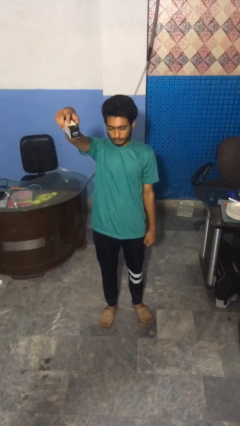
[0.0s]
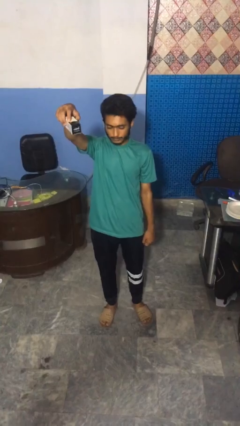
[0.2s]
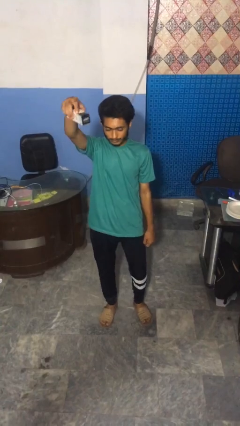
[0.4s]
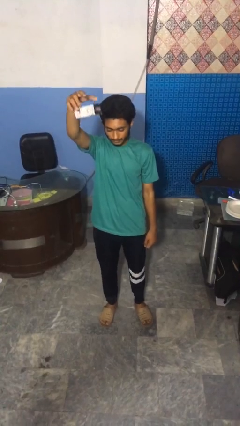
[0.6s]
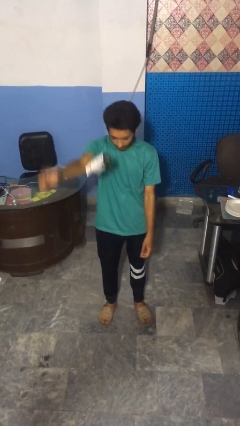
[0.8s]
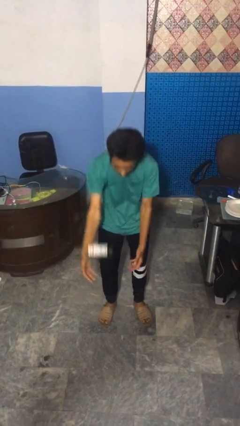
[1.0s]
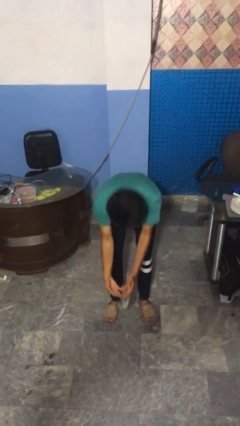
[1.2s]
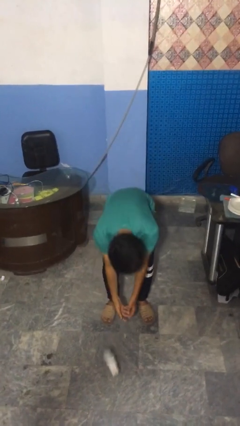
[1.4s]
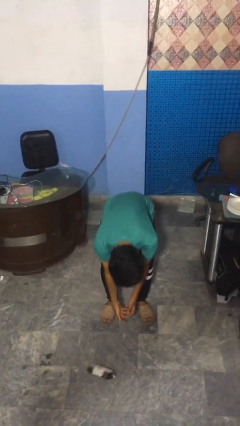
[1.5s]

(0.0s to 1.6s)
person drops object

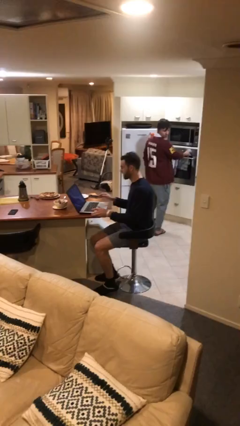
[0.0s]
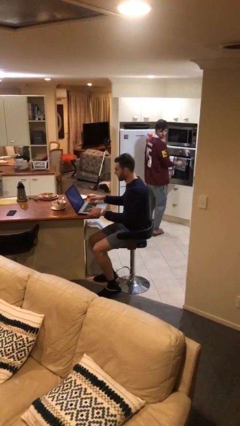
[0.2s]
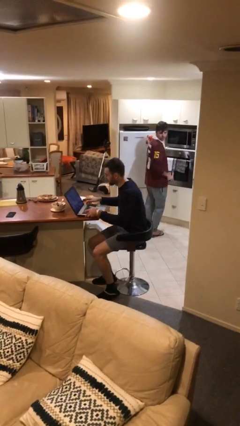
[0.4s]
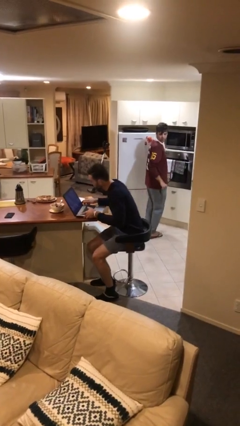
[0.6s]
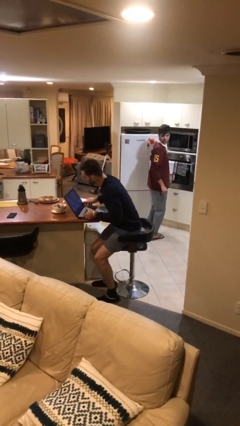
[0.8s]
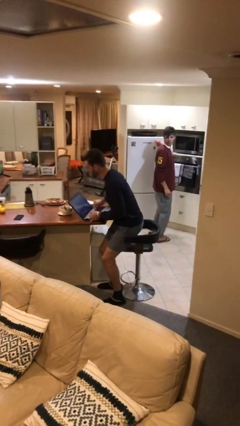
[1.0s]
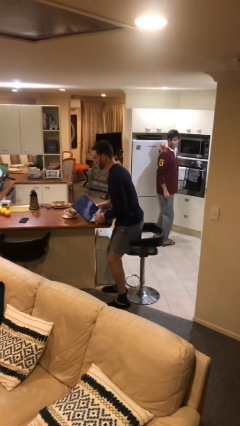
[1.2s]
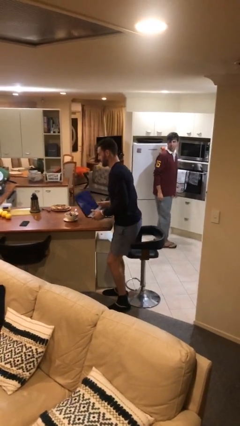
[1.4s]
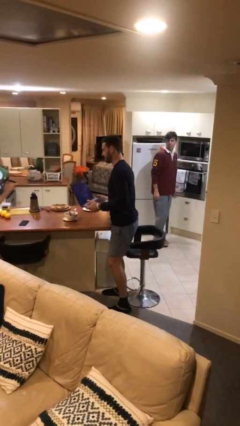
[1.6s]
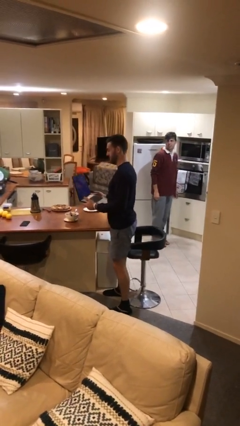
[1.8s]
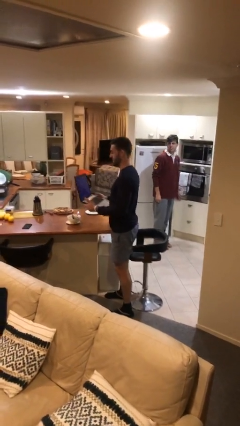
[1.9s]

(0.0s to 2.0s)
person stands up

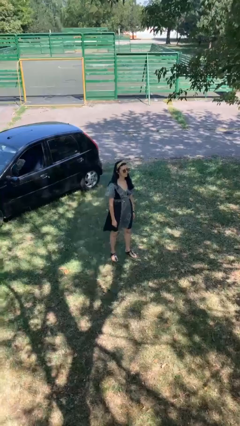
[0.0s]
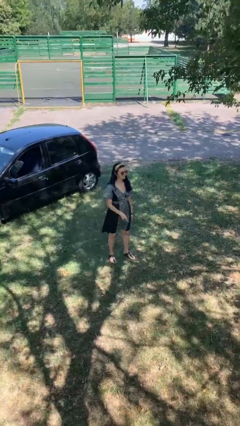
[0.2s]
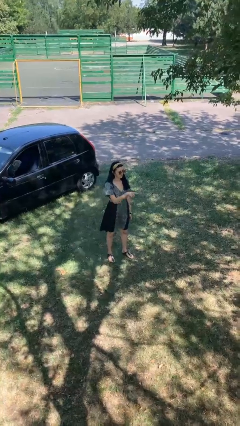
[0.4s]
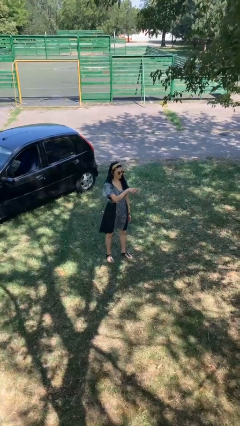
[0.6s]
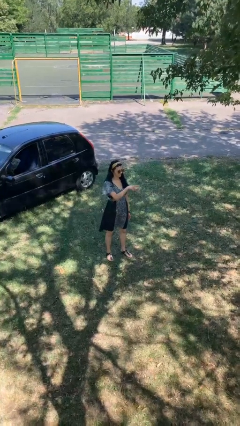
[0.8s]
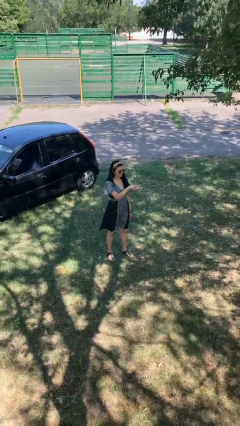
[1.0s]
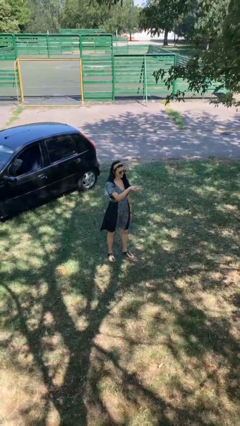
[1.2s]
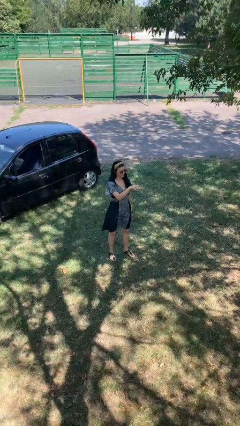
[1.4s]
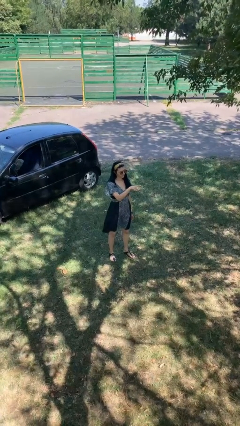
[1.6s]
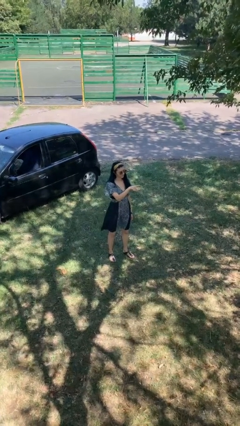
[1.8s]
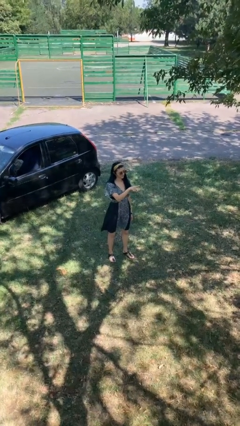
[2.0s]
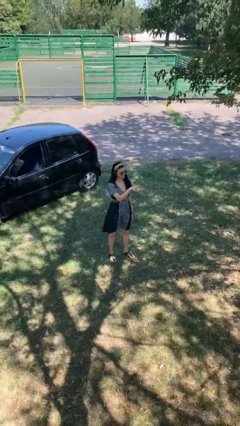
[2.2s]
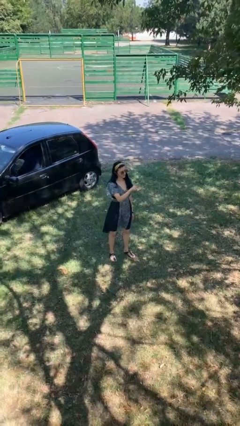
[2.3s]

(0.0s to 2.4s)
person points at person

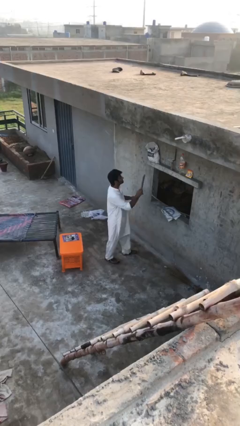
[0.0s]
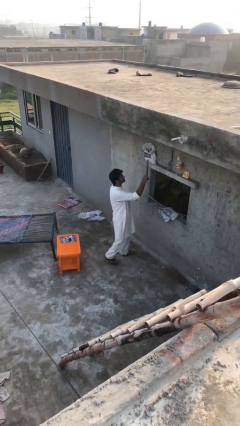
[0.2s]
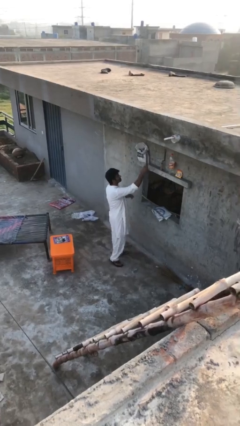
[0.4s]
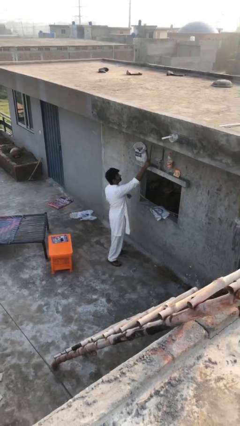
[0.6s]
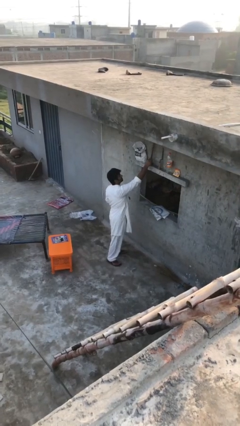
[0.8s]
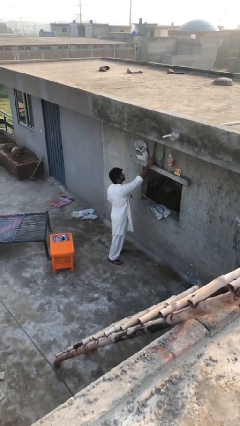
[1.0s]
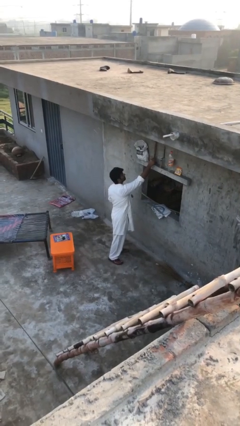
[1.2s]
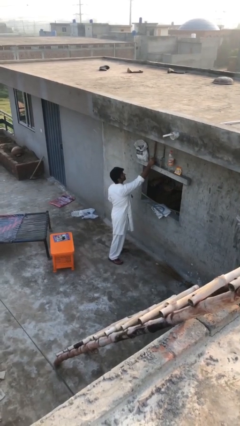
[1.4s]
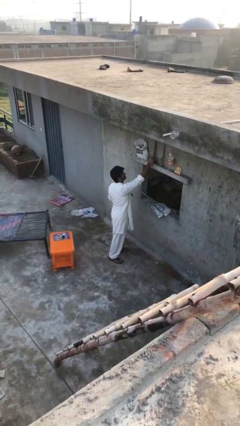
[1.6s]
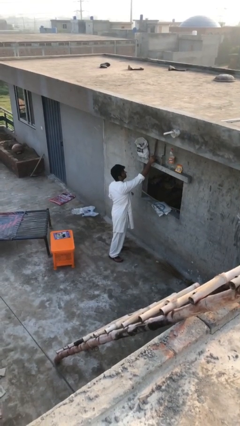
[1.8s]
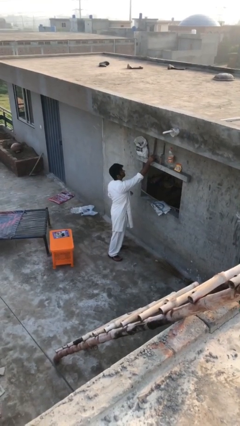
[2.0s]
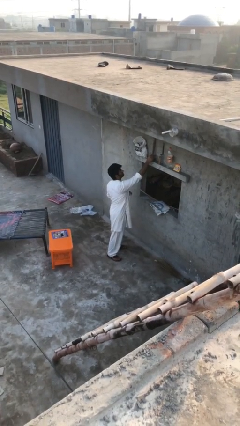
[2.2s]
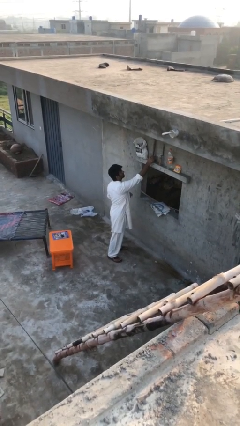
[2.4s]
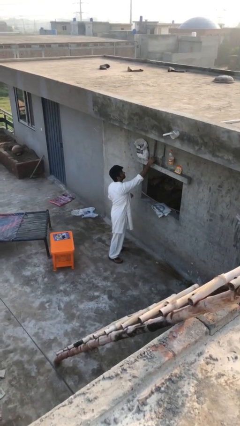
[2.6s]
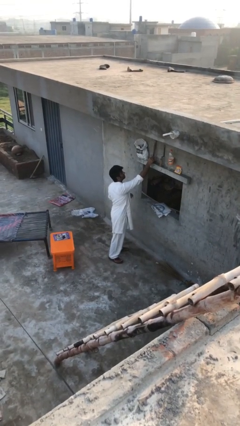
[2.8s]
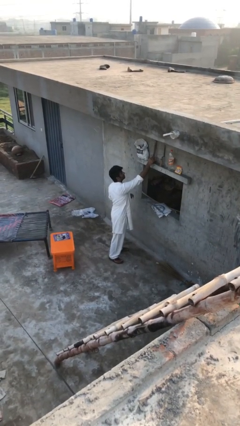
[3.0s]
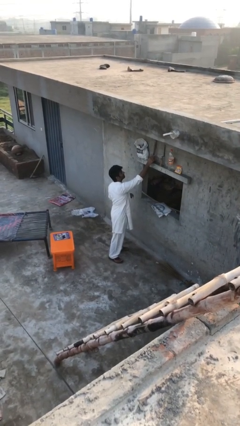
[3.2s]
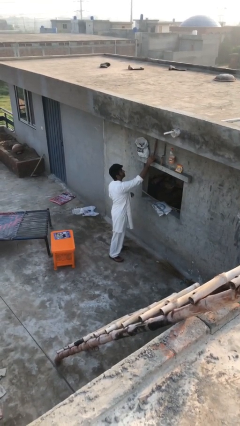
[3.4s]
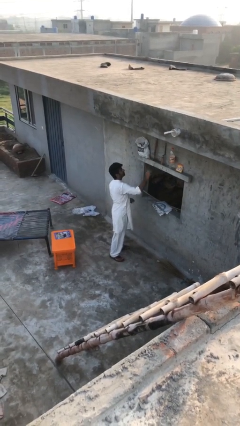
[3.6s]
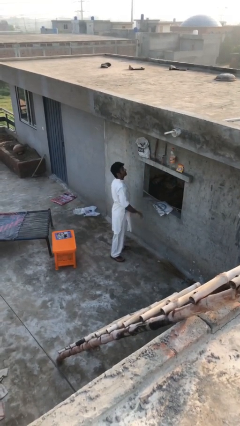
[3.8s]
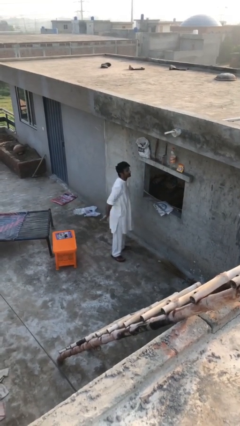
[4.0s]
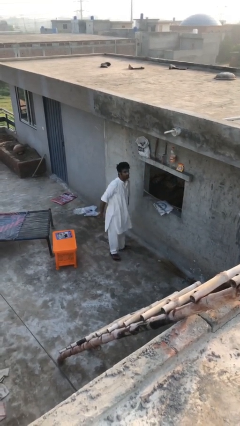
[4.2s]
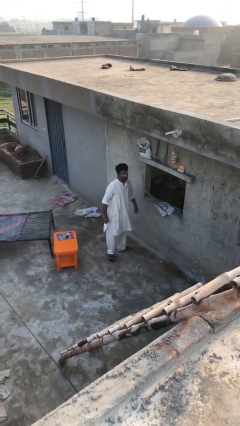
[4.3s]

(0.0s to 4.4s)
person puts down object on shelf

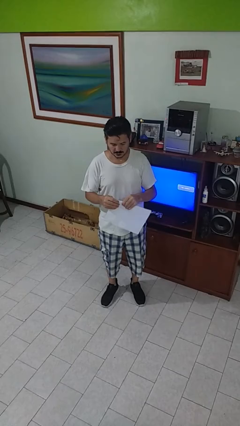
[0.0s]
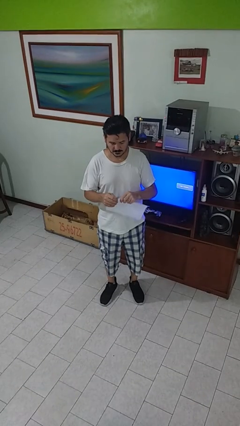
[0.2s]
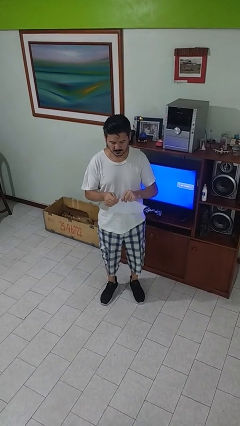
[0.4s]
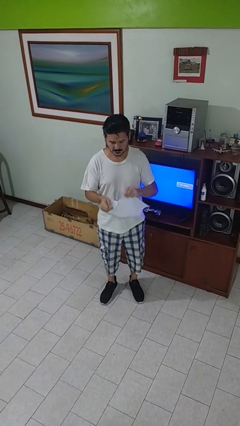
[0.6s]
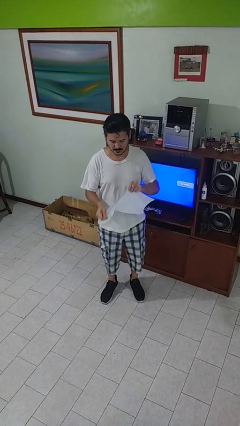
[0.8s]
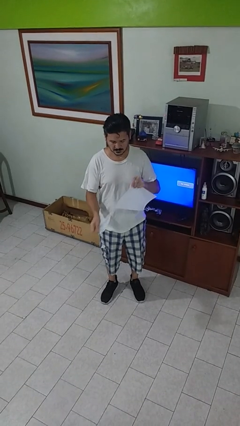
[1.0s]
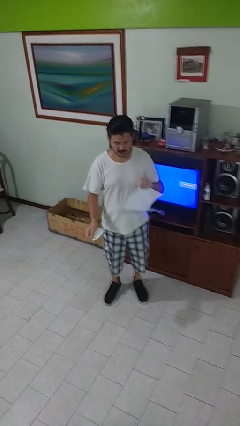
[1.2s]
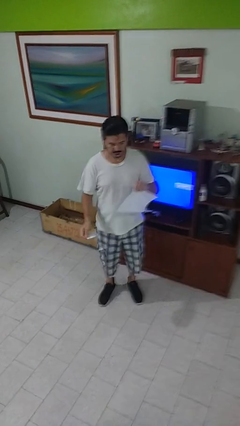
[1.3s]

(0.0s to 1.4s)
person tears paper

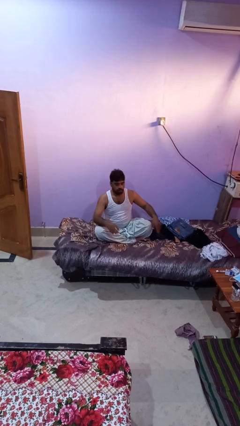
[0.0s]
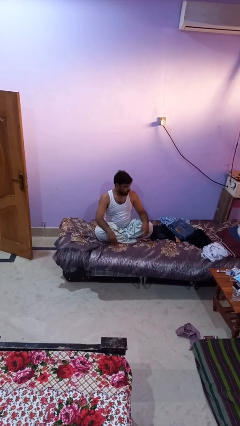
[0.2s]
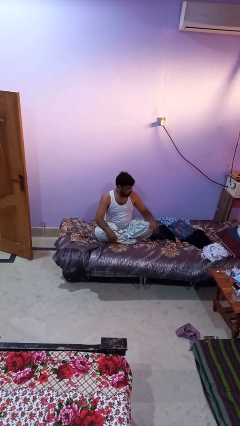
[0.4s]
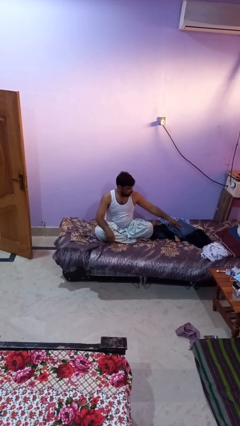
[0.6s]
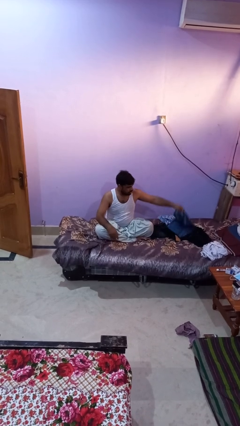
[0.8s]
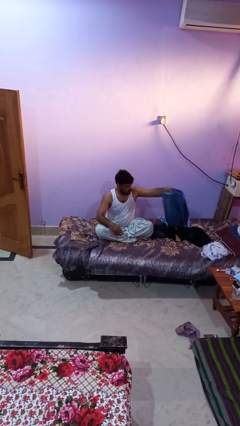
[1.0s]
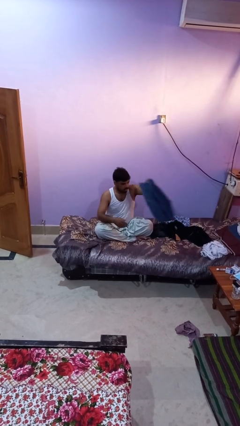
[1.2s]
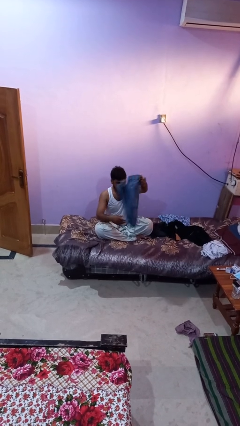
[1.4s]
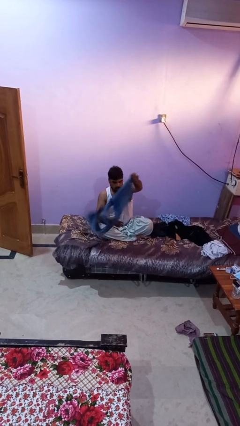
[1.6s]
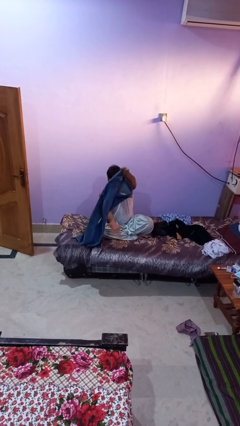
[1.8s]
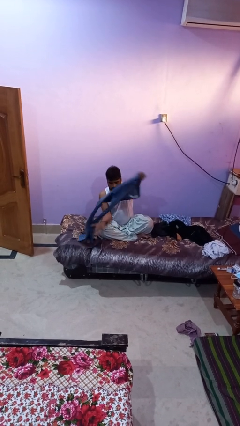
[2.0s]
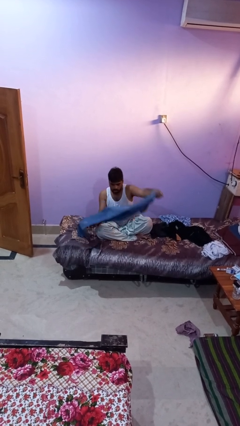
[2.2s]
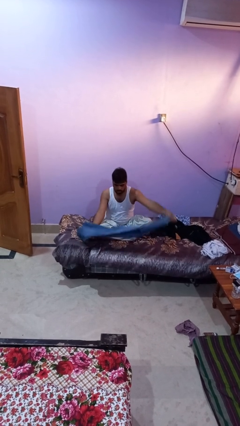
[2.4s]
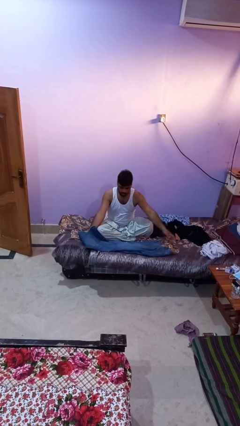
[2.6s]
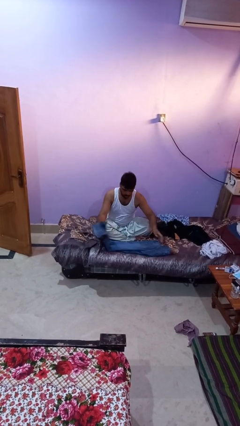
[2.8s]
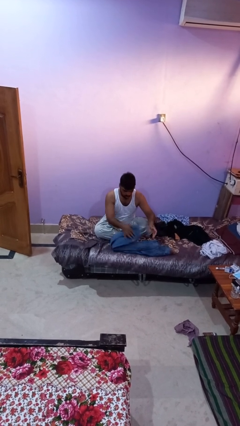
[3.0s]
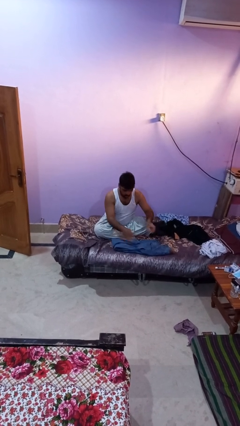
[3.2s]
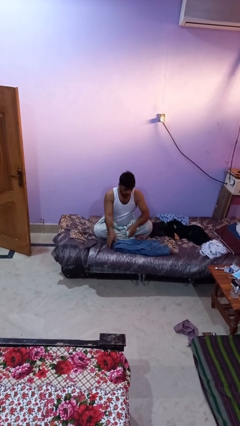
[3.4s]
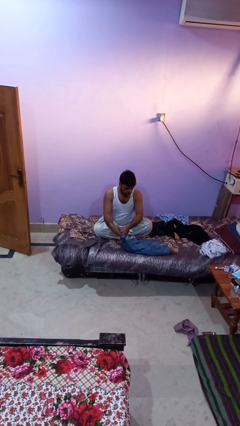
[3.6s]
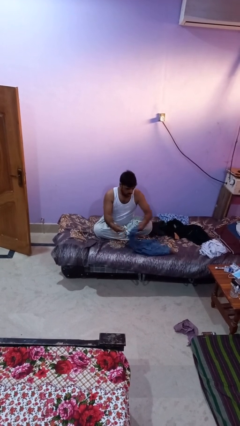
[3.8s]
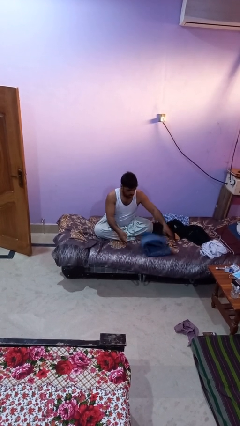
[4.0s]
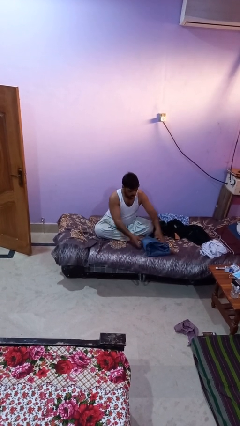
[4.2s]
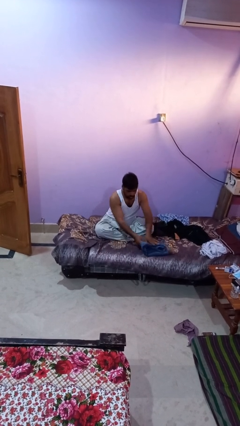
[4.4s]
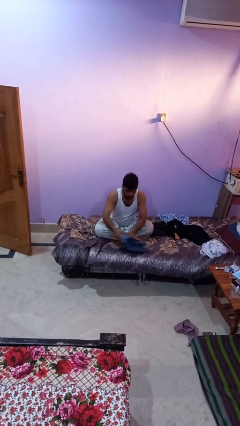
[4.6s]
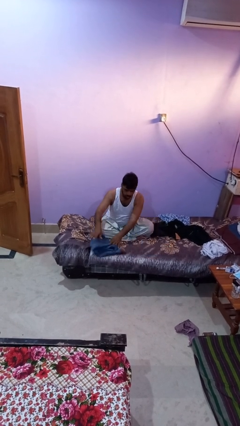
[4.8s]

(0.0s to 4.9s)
person folds pants

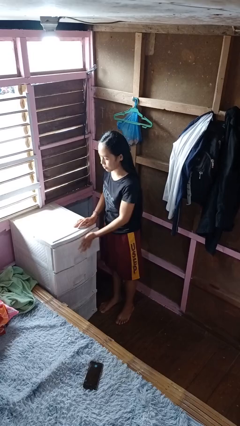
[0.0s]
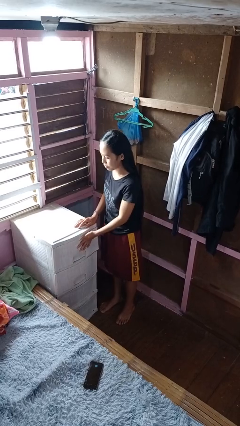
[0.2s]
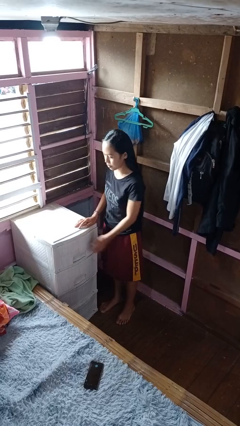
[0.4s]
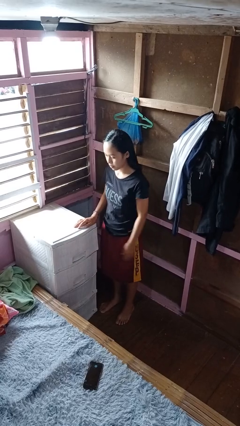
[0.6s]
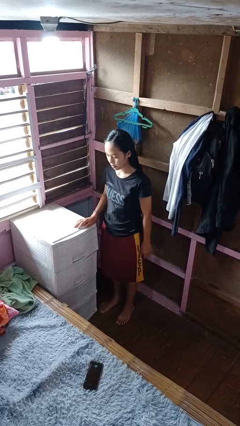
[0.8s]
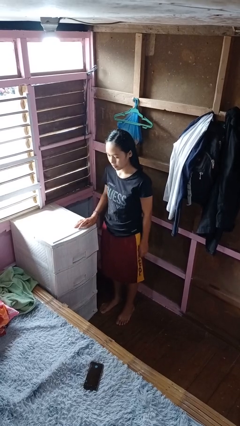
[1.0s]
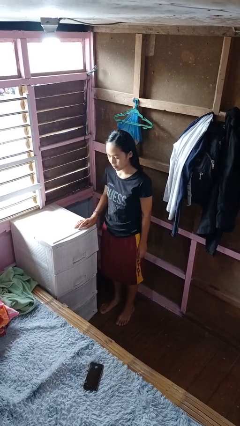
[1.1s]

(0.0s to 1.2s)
person closes dresser drawer
